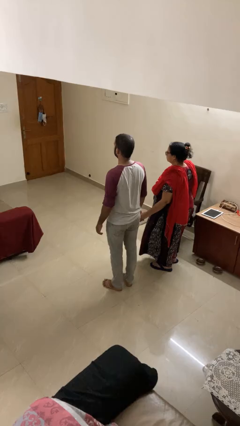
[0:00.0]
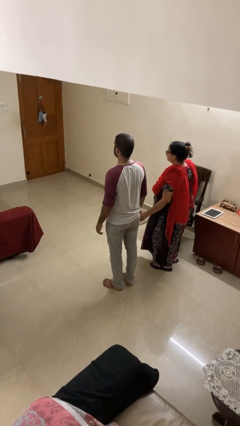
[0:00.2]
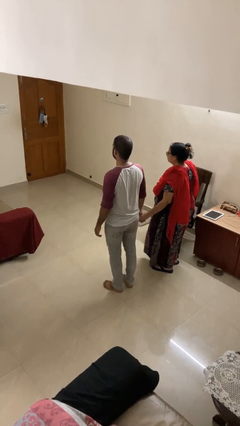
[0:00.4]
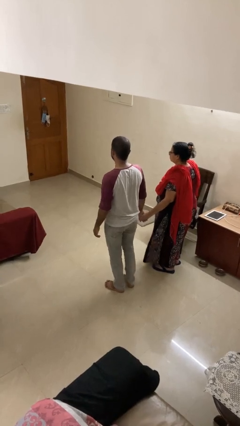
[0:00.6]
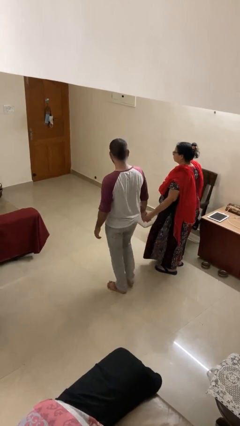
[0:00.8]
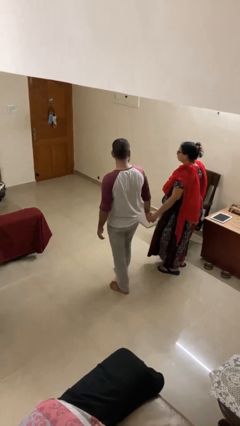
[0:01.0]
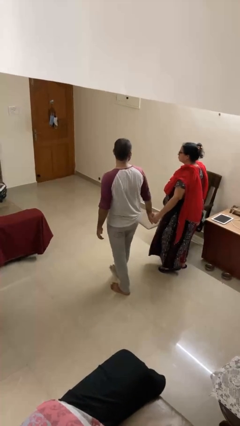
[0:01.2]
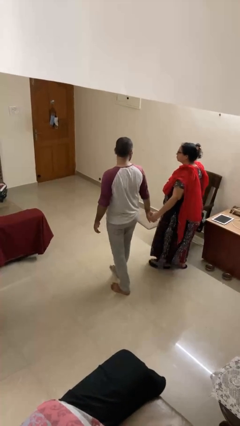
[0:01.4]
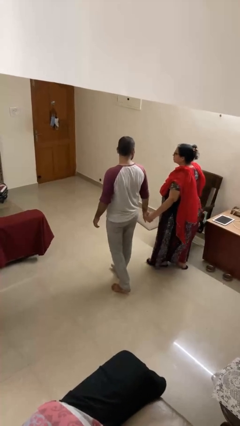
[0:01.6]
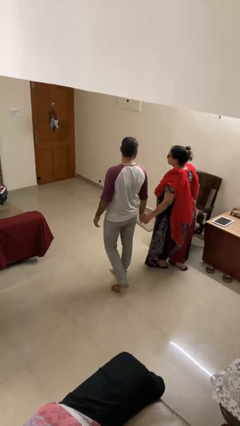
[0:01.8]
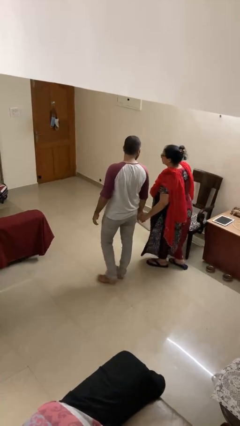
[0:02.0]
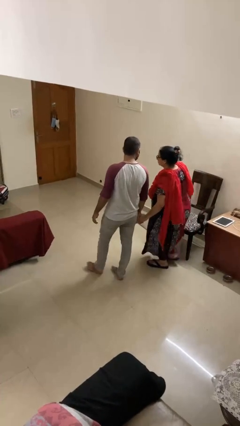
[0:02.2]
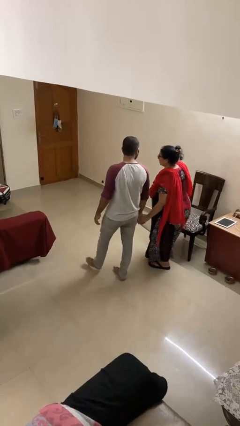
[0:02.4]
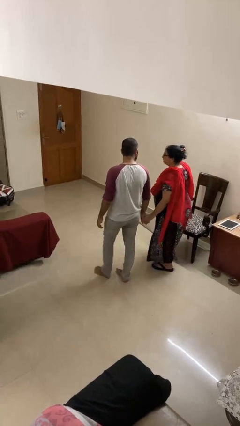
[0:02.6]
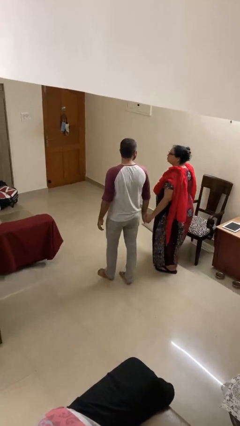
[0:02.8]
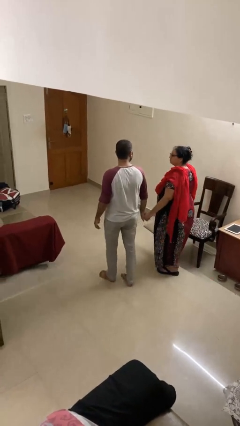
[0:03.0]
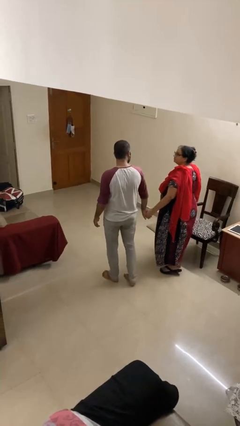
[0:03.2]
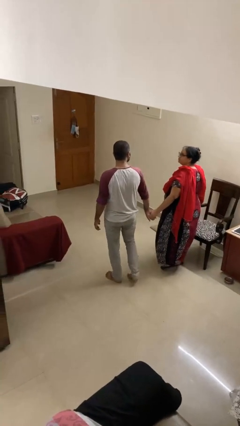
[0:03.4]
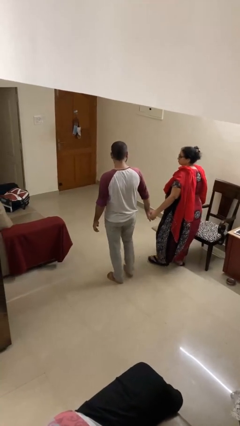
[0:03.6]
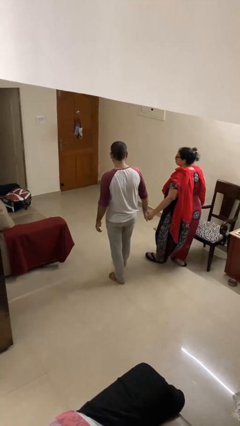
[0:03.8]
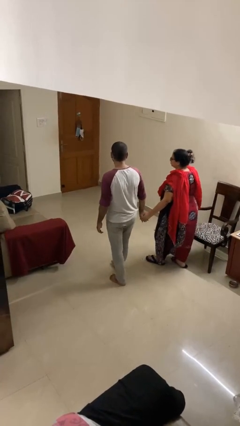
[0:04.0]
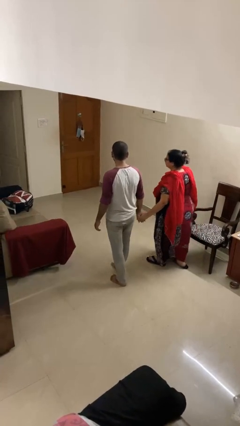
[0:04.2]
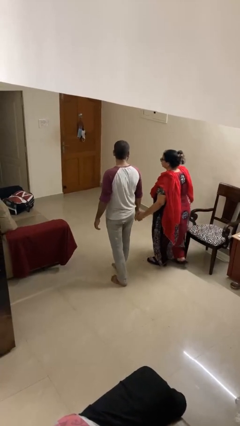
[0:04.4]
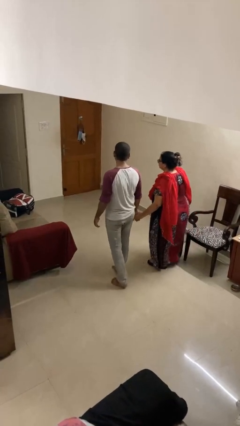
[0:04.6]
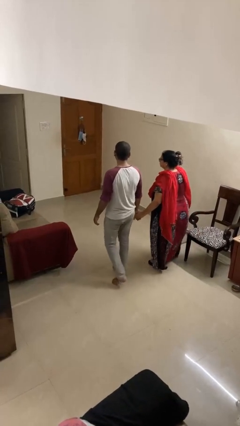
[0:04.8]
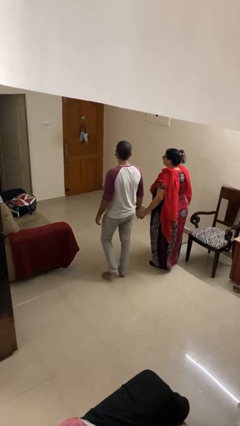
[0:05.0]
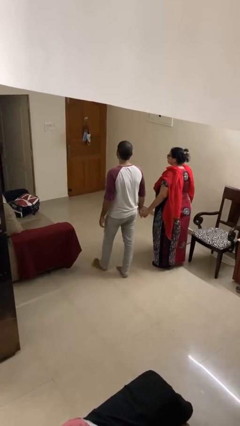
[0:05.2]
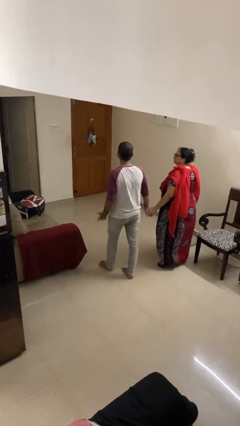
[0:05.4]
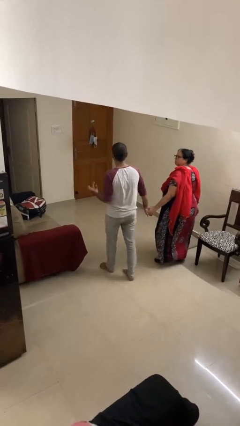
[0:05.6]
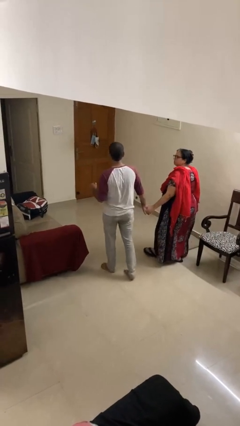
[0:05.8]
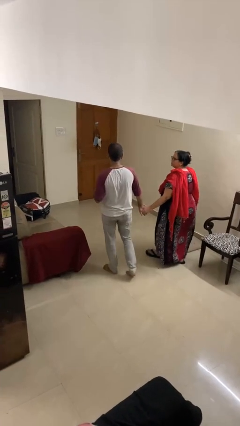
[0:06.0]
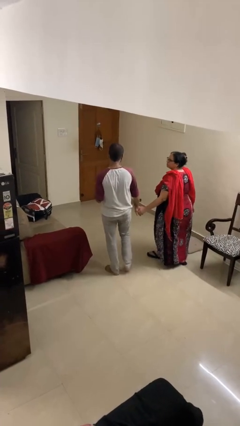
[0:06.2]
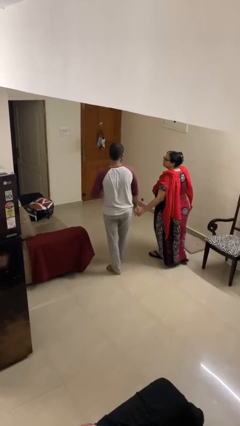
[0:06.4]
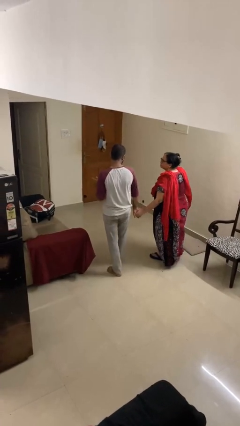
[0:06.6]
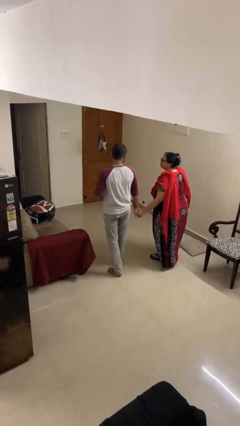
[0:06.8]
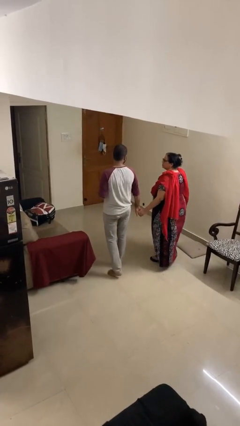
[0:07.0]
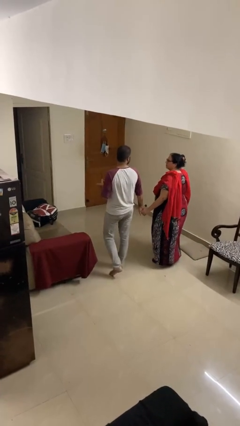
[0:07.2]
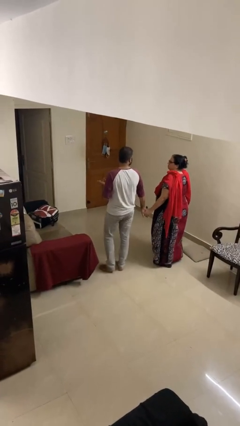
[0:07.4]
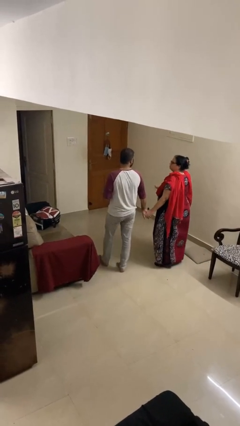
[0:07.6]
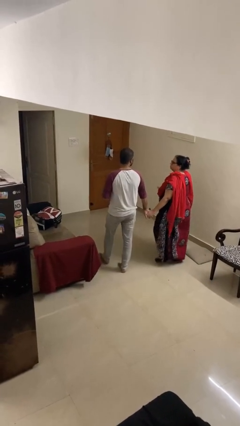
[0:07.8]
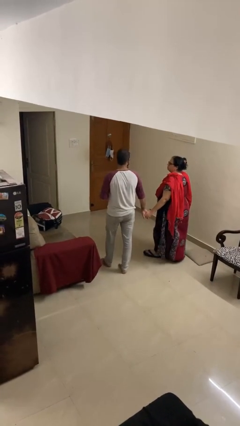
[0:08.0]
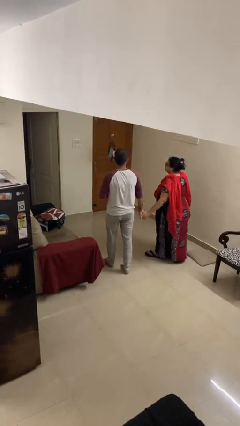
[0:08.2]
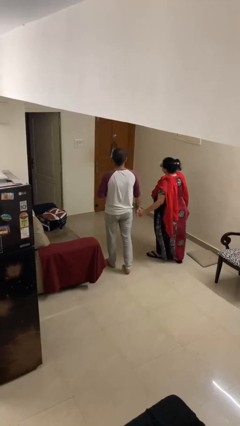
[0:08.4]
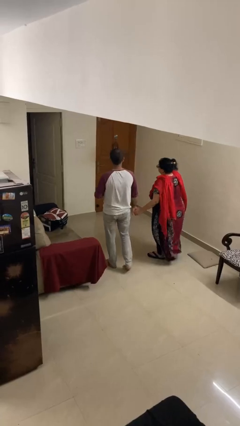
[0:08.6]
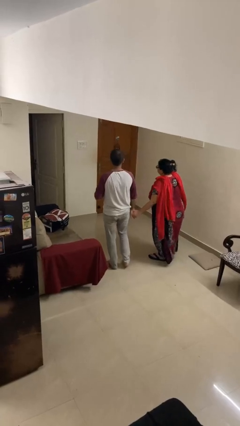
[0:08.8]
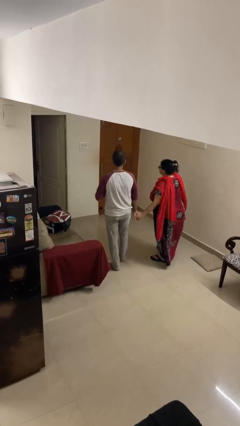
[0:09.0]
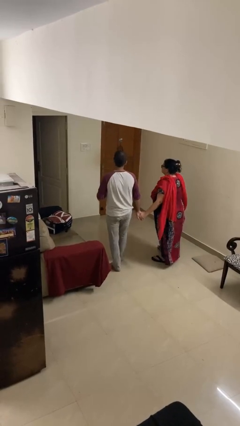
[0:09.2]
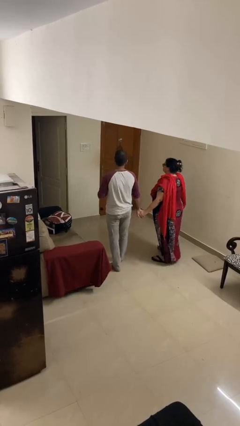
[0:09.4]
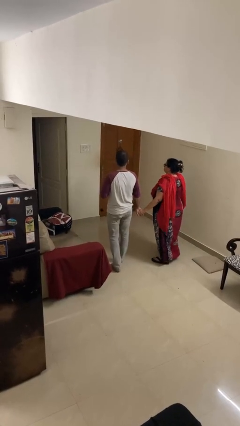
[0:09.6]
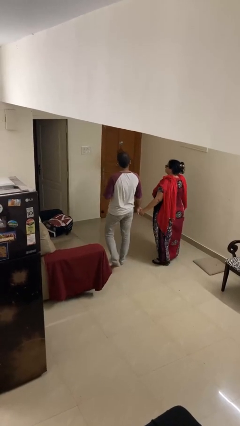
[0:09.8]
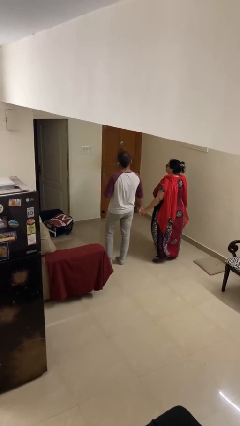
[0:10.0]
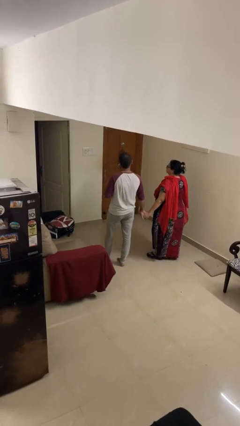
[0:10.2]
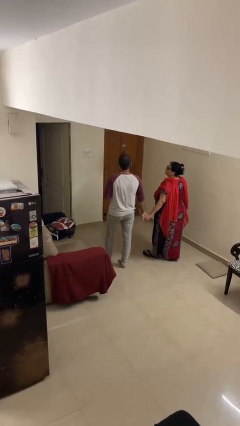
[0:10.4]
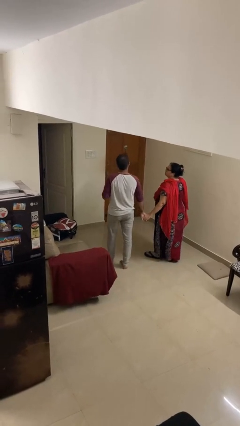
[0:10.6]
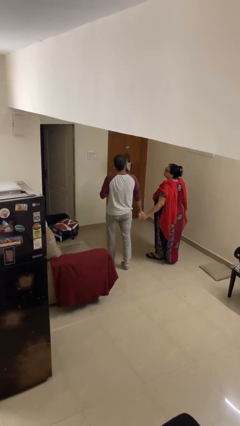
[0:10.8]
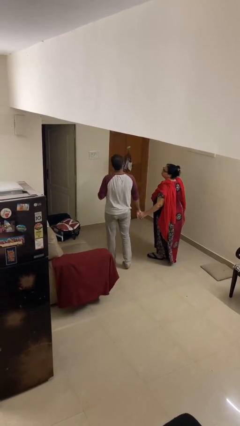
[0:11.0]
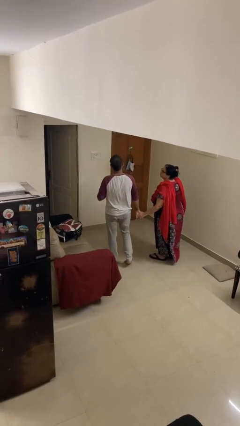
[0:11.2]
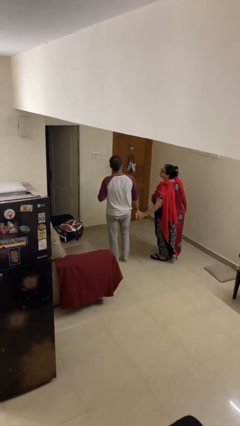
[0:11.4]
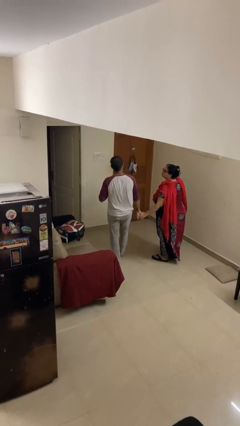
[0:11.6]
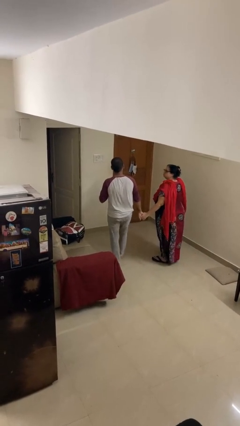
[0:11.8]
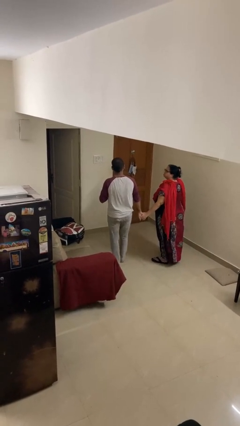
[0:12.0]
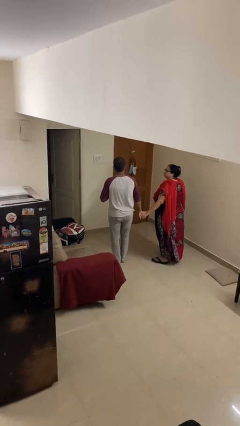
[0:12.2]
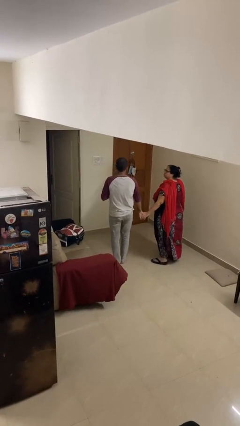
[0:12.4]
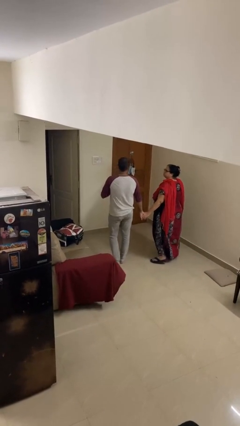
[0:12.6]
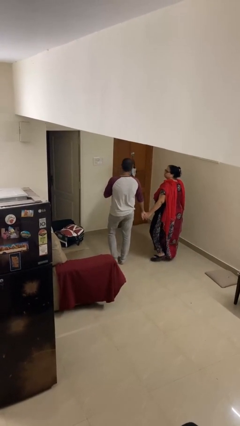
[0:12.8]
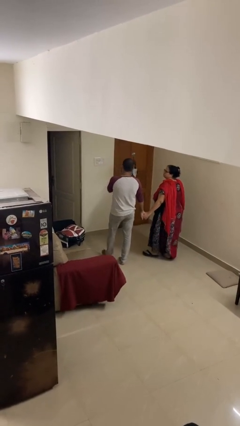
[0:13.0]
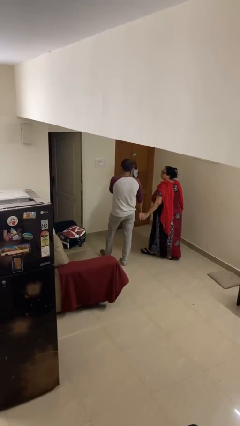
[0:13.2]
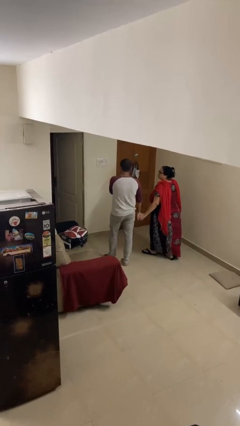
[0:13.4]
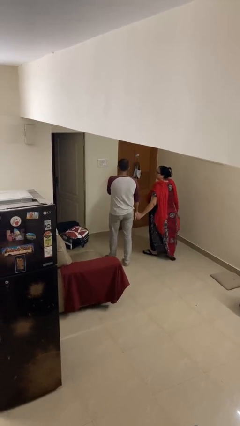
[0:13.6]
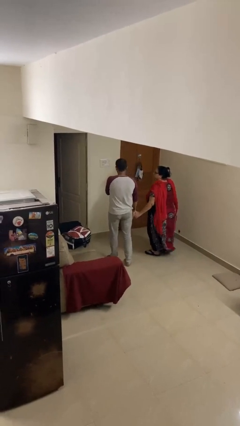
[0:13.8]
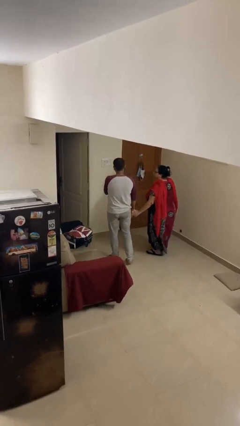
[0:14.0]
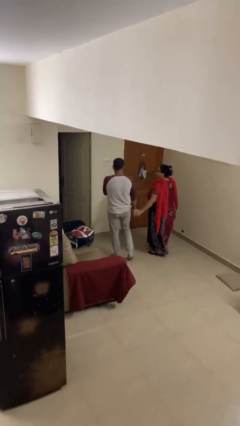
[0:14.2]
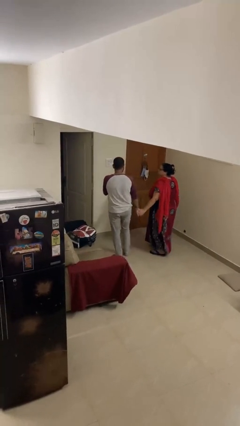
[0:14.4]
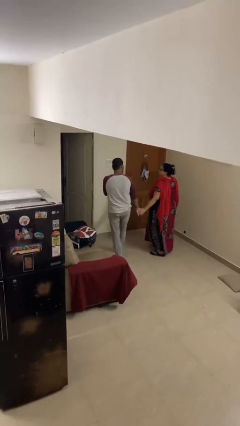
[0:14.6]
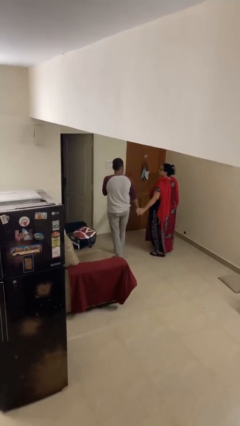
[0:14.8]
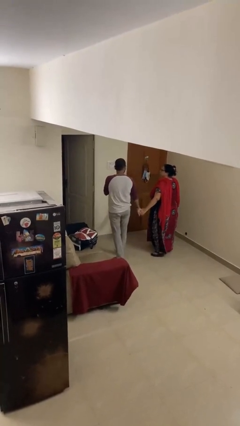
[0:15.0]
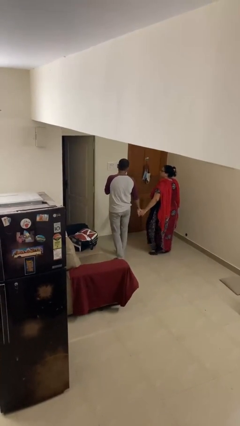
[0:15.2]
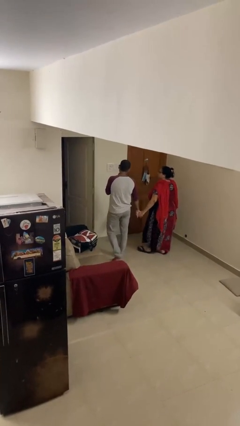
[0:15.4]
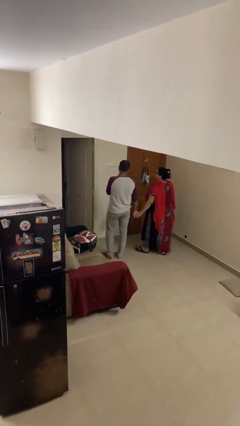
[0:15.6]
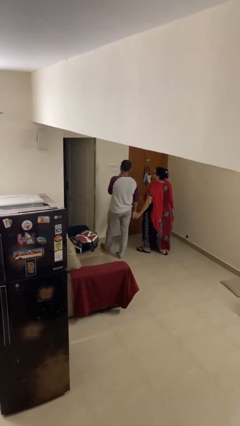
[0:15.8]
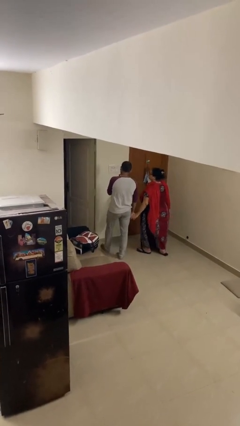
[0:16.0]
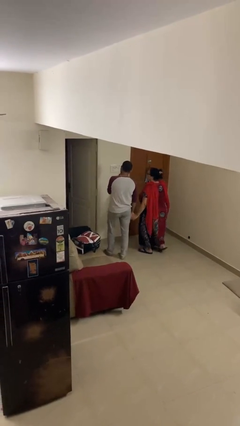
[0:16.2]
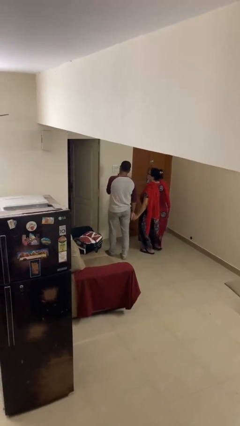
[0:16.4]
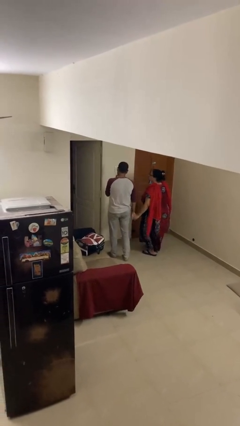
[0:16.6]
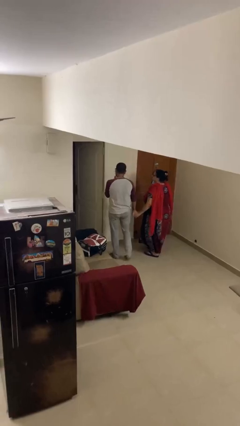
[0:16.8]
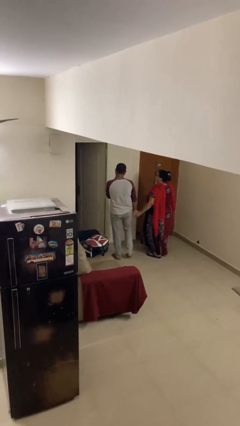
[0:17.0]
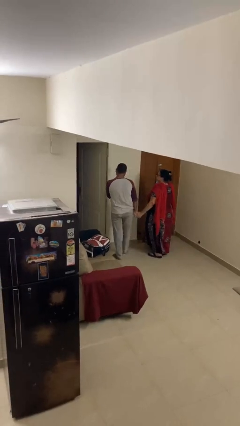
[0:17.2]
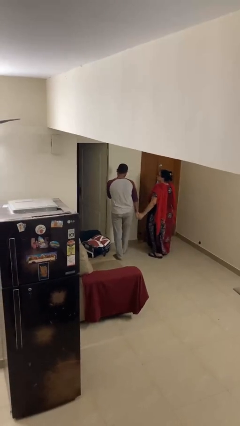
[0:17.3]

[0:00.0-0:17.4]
person holds hand

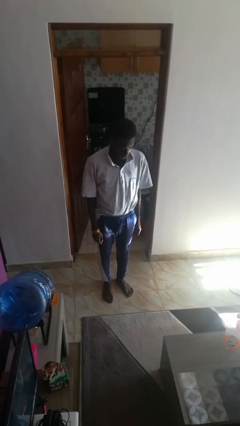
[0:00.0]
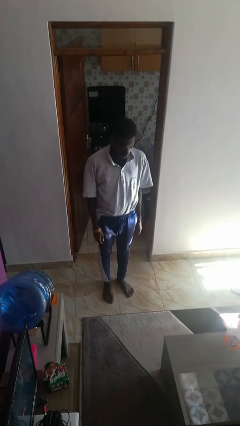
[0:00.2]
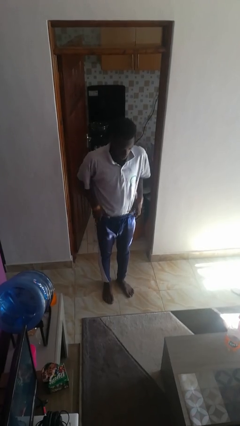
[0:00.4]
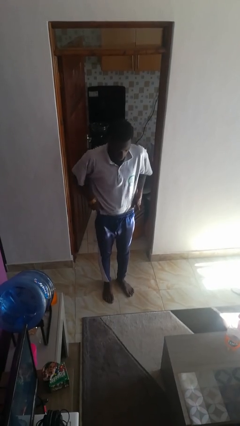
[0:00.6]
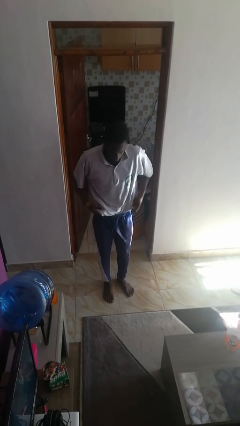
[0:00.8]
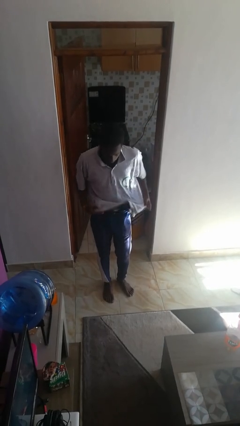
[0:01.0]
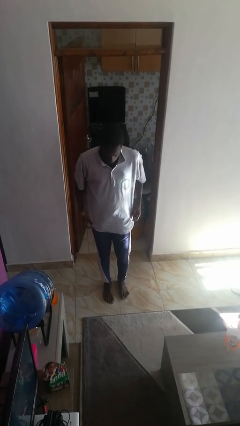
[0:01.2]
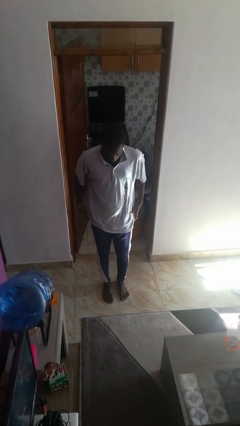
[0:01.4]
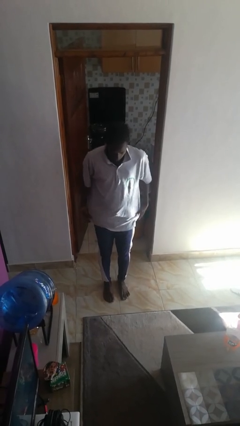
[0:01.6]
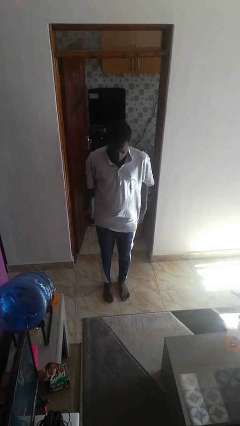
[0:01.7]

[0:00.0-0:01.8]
person untucks shirt
